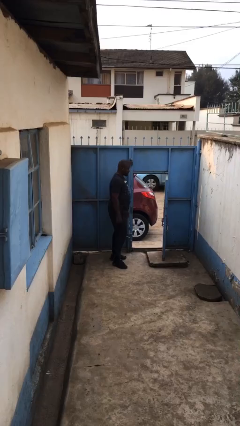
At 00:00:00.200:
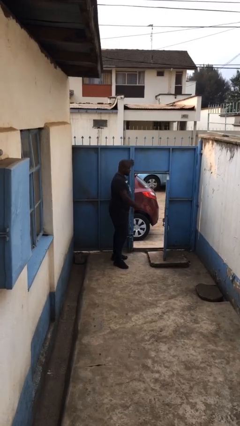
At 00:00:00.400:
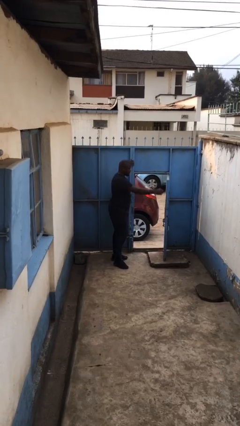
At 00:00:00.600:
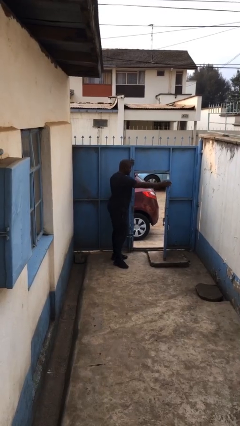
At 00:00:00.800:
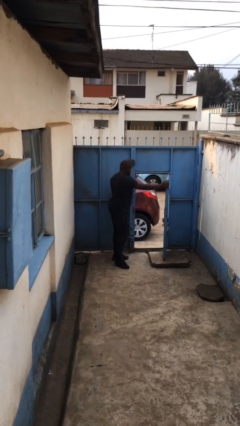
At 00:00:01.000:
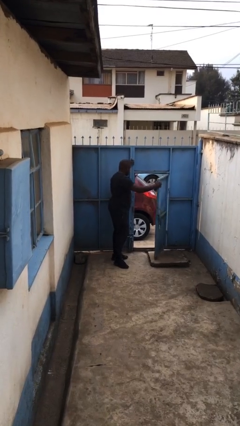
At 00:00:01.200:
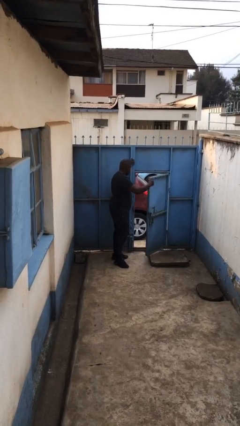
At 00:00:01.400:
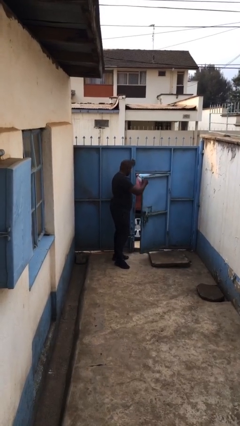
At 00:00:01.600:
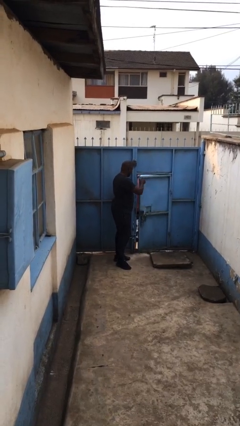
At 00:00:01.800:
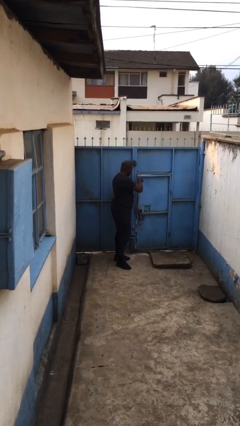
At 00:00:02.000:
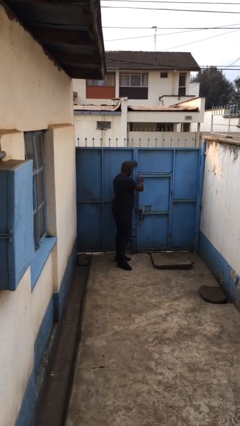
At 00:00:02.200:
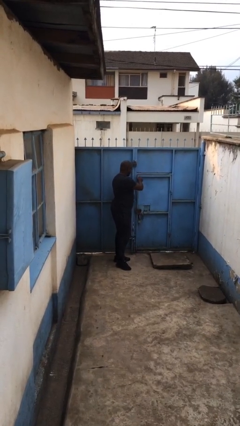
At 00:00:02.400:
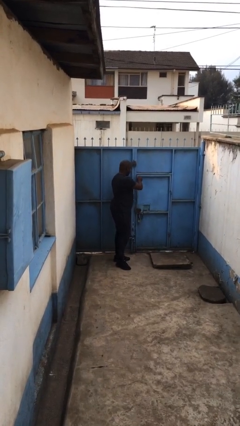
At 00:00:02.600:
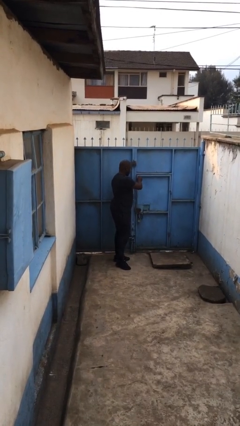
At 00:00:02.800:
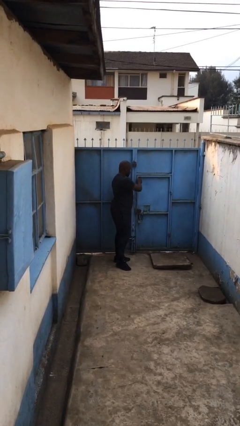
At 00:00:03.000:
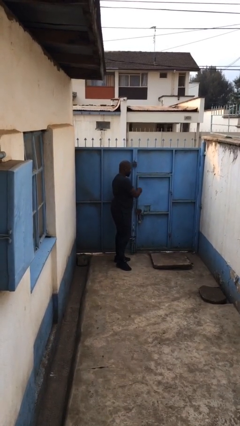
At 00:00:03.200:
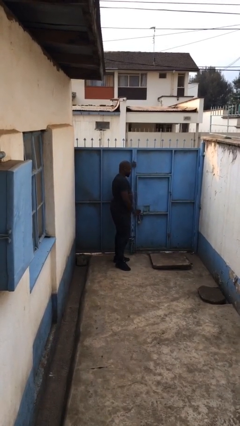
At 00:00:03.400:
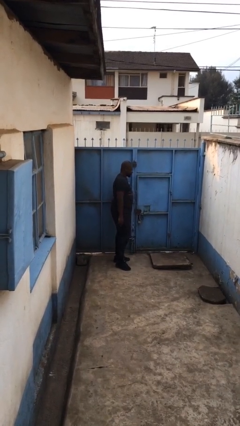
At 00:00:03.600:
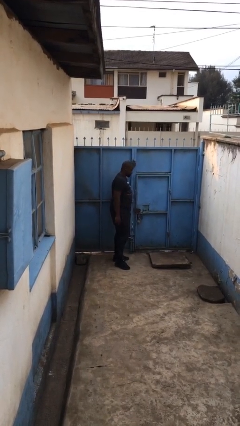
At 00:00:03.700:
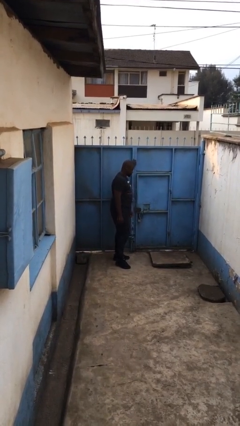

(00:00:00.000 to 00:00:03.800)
person closes gate

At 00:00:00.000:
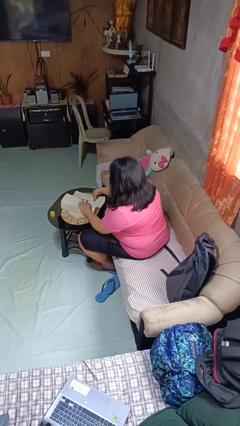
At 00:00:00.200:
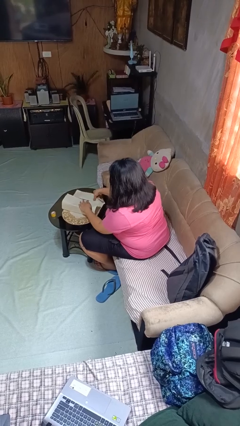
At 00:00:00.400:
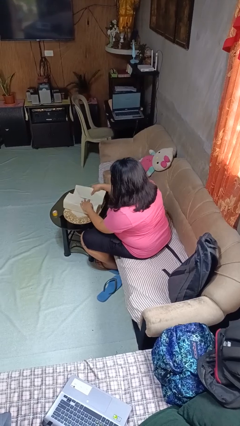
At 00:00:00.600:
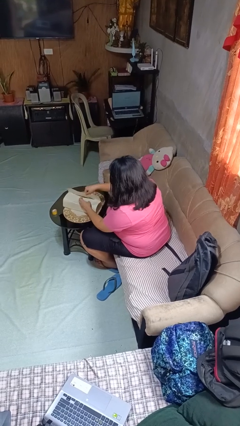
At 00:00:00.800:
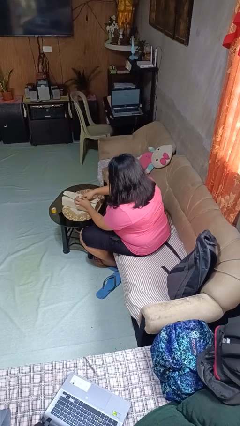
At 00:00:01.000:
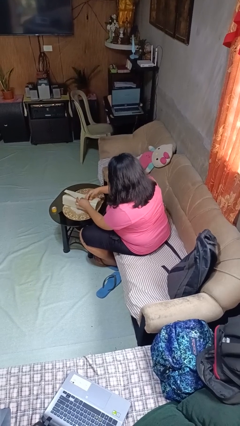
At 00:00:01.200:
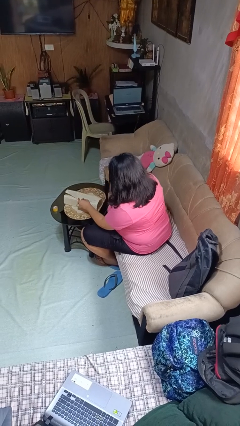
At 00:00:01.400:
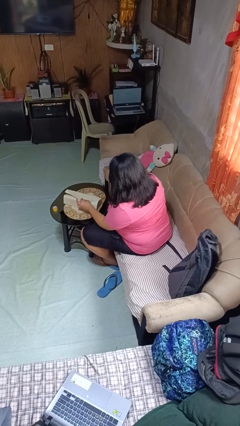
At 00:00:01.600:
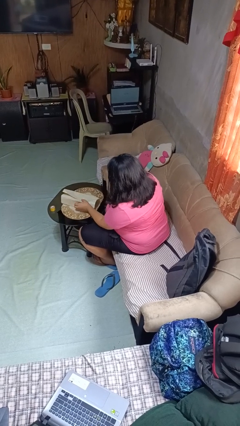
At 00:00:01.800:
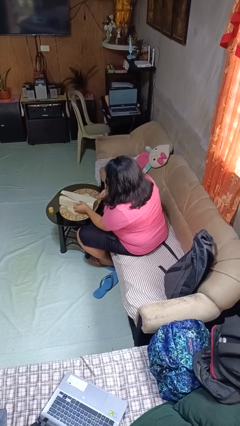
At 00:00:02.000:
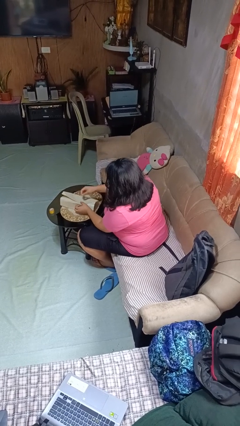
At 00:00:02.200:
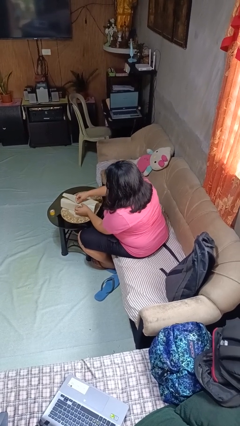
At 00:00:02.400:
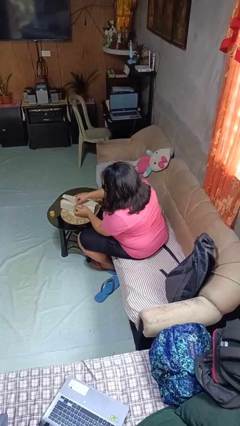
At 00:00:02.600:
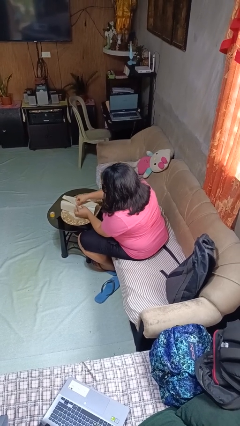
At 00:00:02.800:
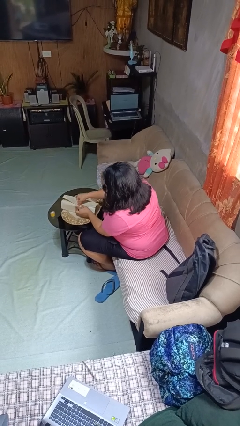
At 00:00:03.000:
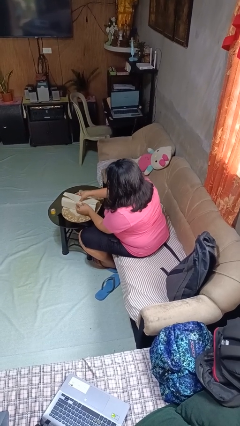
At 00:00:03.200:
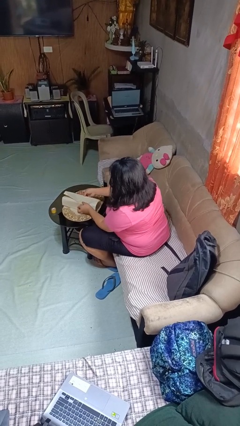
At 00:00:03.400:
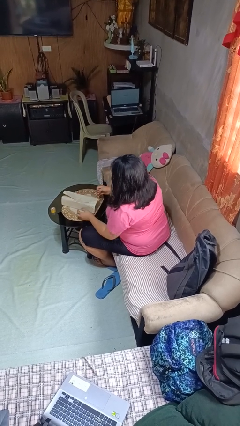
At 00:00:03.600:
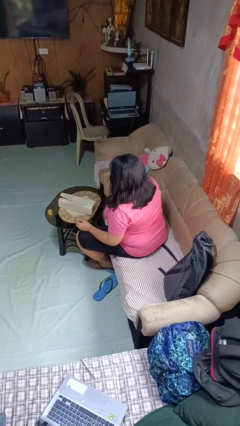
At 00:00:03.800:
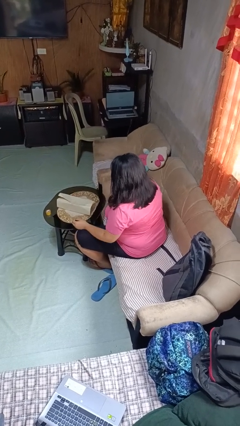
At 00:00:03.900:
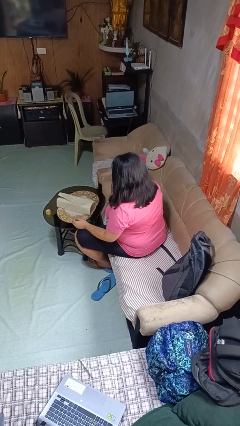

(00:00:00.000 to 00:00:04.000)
person wraps box

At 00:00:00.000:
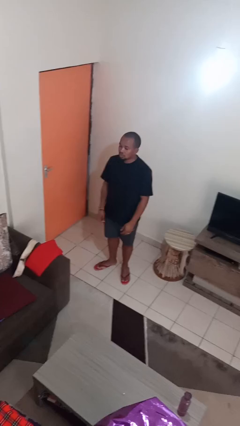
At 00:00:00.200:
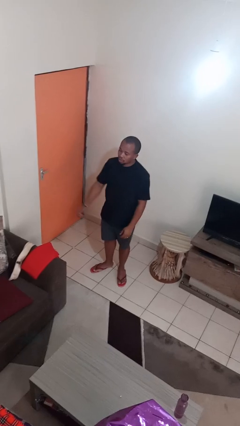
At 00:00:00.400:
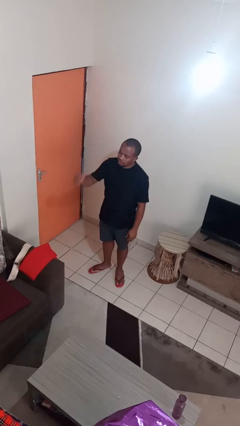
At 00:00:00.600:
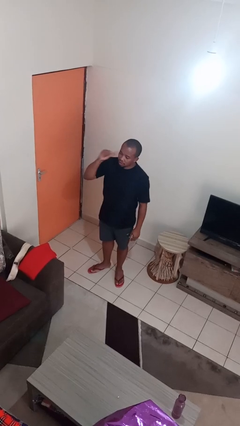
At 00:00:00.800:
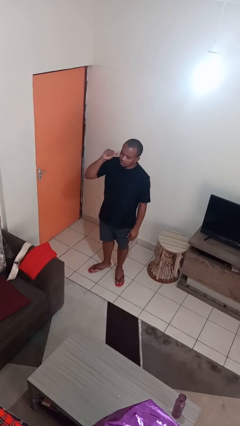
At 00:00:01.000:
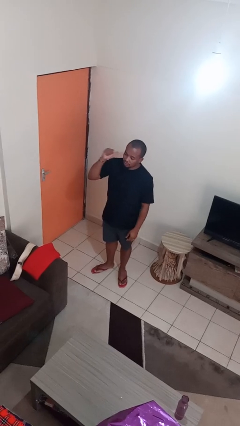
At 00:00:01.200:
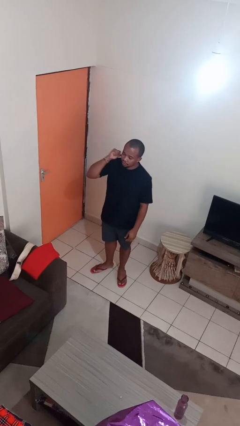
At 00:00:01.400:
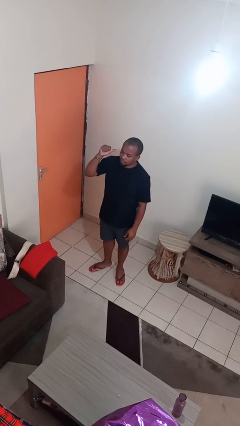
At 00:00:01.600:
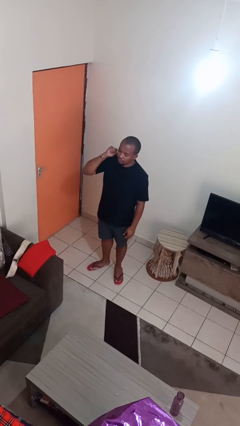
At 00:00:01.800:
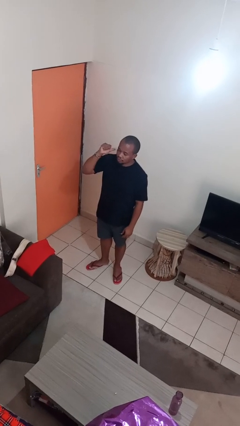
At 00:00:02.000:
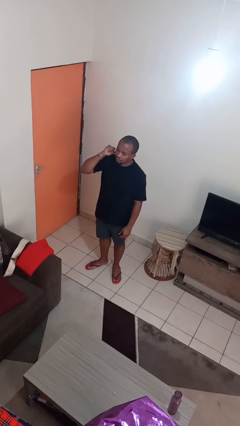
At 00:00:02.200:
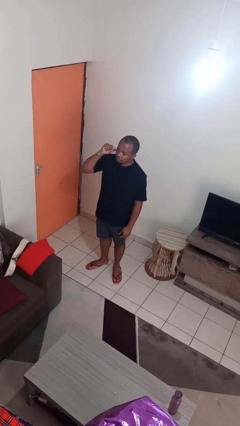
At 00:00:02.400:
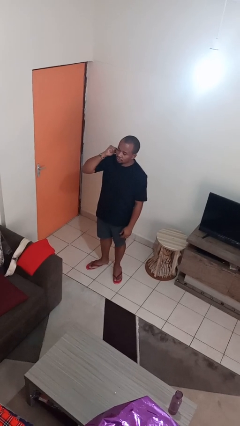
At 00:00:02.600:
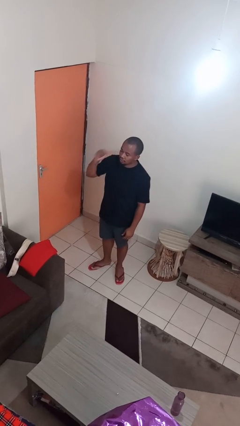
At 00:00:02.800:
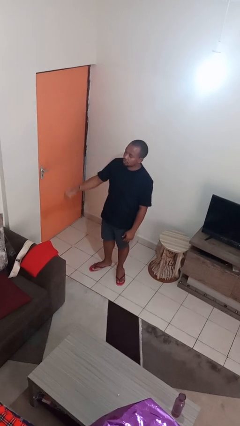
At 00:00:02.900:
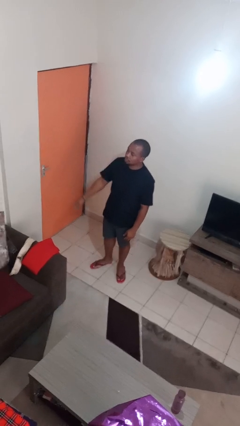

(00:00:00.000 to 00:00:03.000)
person gestures behind me

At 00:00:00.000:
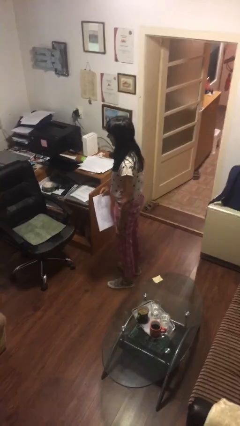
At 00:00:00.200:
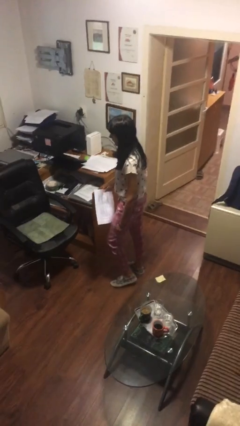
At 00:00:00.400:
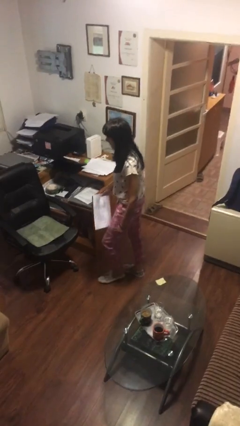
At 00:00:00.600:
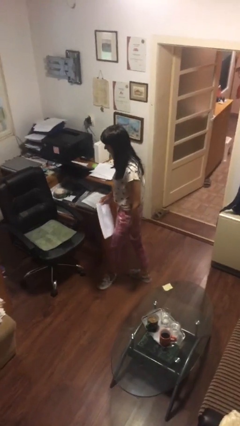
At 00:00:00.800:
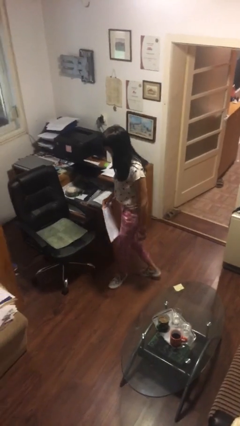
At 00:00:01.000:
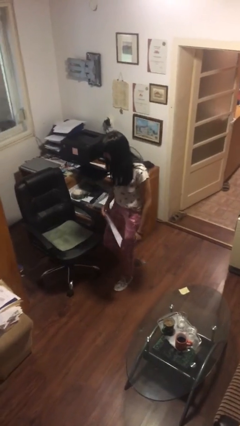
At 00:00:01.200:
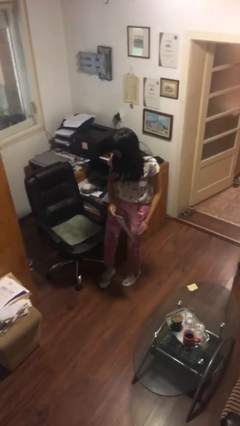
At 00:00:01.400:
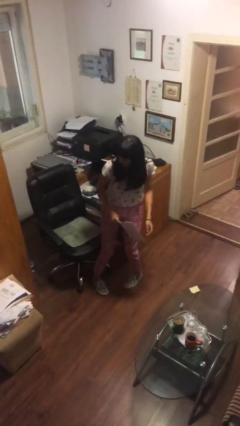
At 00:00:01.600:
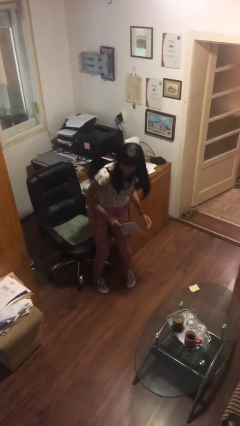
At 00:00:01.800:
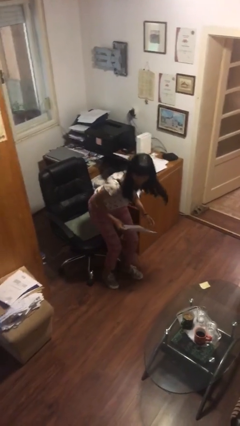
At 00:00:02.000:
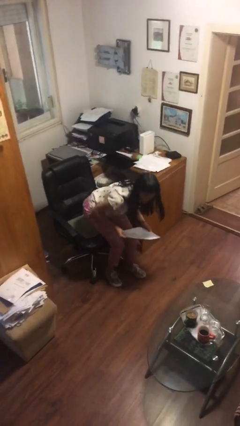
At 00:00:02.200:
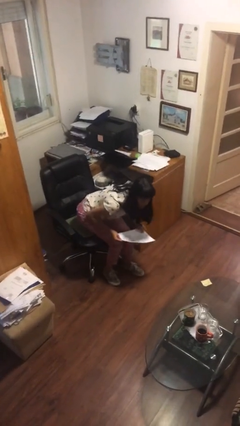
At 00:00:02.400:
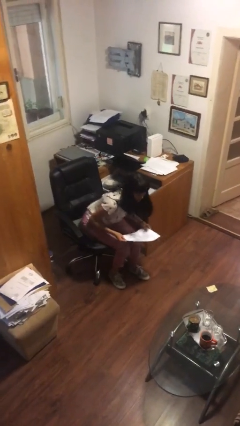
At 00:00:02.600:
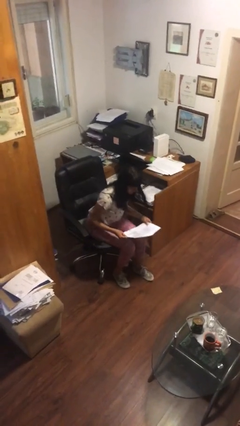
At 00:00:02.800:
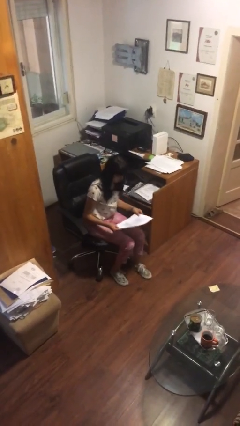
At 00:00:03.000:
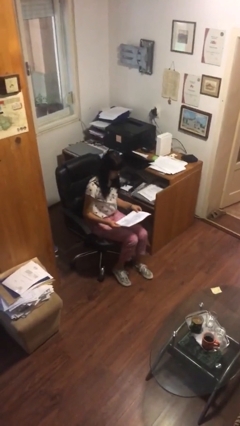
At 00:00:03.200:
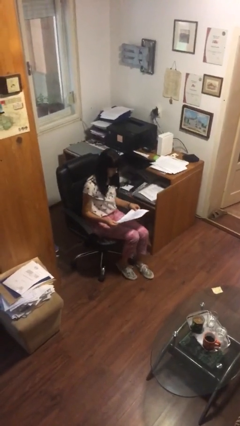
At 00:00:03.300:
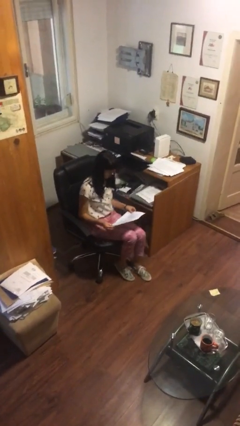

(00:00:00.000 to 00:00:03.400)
person sits down

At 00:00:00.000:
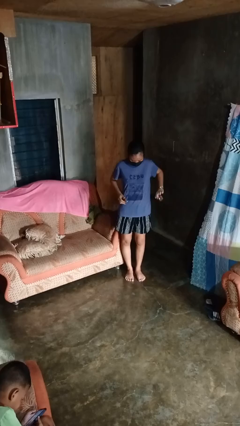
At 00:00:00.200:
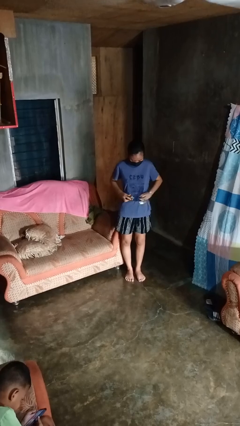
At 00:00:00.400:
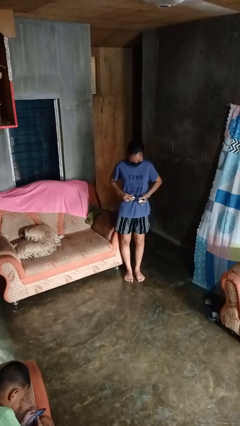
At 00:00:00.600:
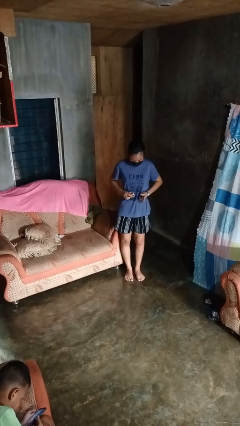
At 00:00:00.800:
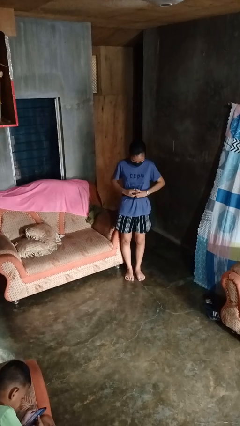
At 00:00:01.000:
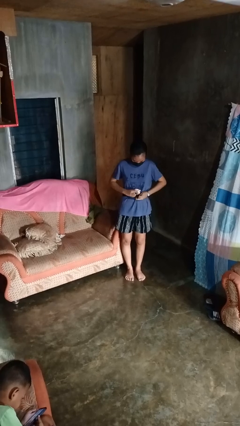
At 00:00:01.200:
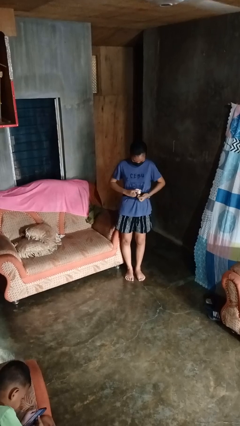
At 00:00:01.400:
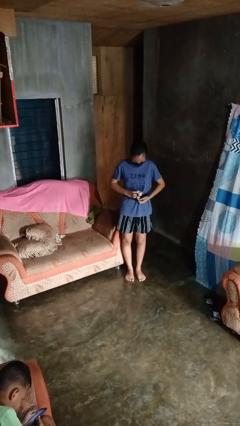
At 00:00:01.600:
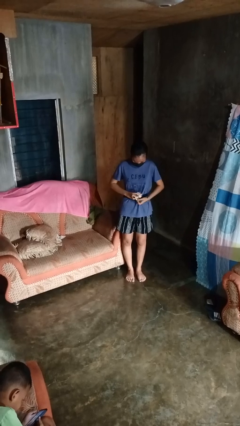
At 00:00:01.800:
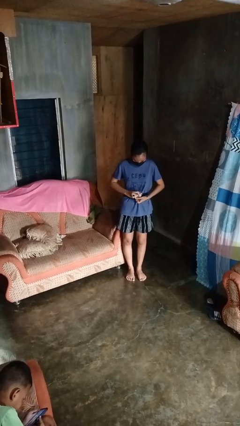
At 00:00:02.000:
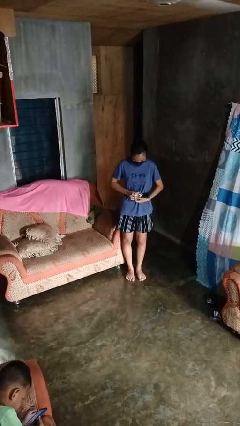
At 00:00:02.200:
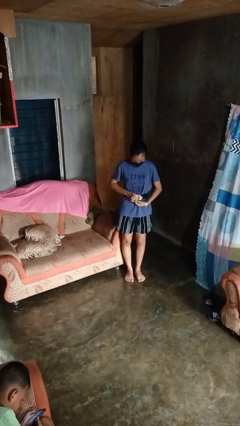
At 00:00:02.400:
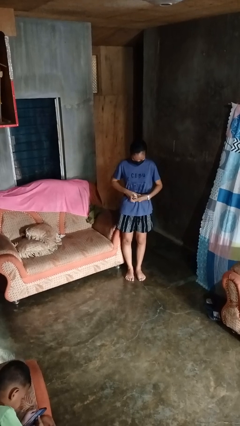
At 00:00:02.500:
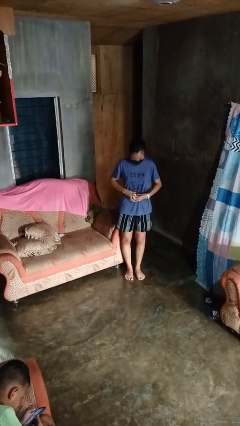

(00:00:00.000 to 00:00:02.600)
person puts on belt
